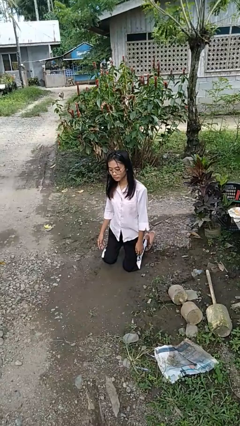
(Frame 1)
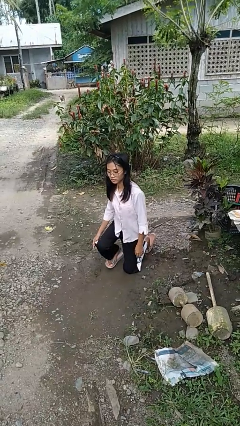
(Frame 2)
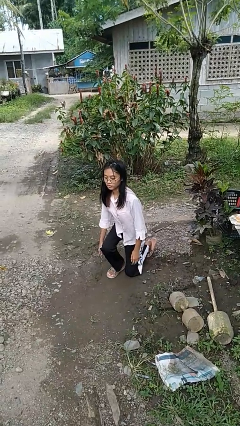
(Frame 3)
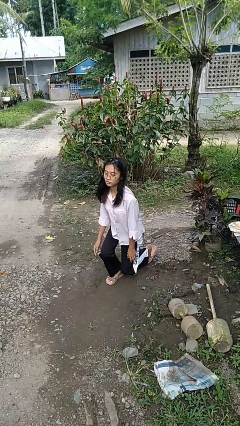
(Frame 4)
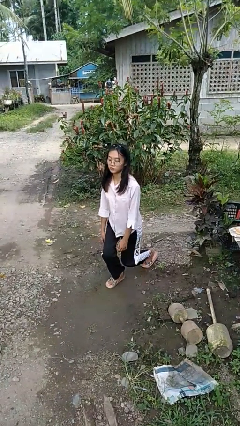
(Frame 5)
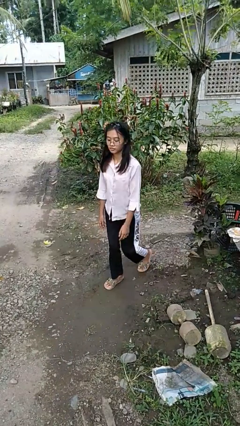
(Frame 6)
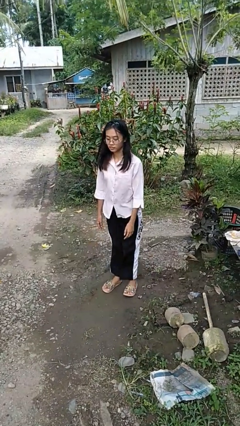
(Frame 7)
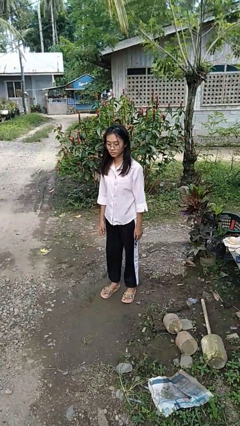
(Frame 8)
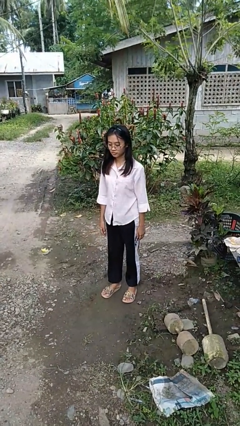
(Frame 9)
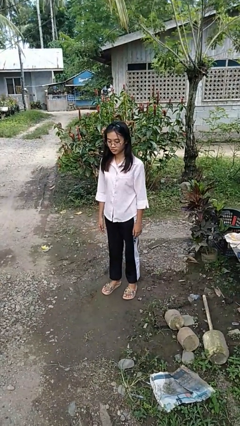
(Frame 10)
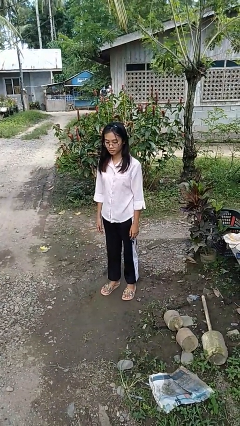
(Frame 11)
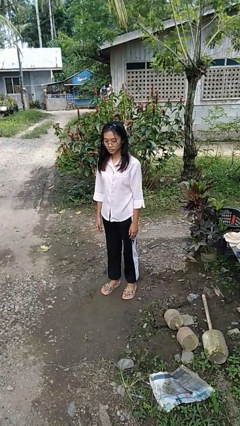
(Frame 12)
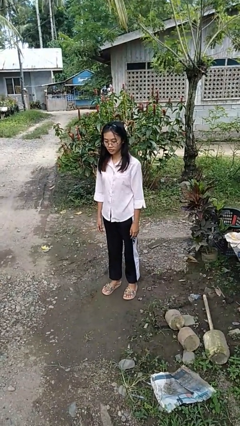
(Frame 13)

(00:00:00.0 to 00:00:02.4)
person stands up from floor

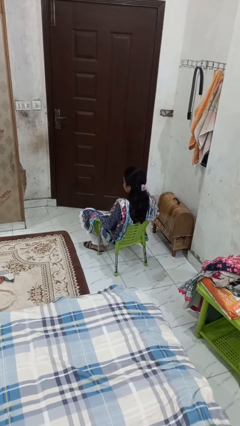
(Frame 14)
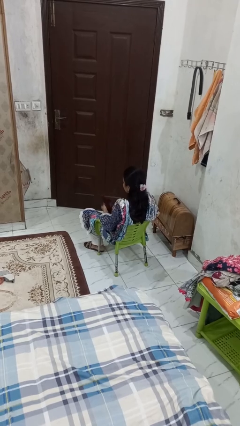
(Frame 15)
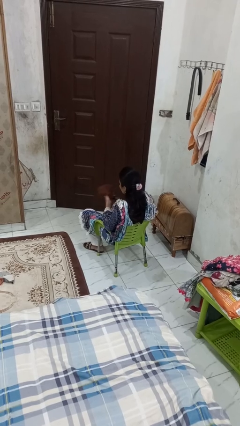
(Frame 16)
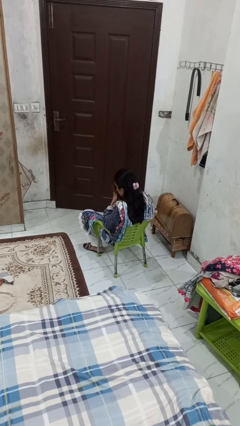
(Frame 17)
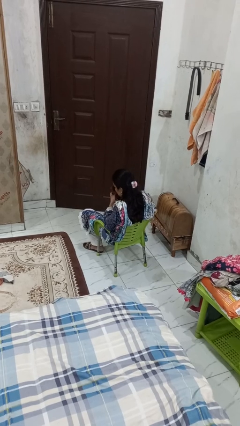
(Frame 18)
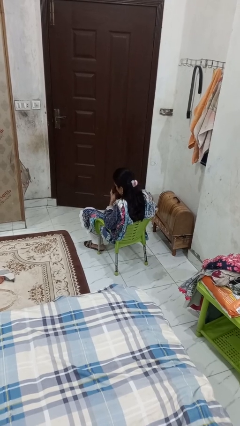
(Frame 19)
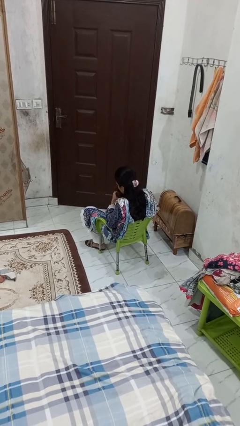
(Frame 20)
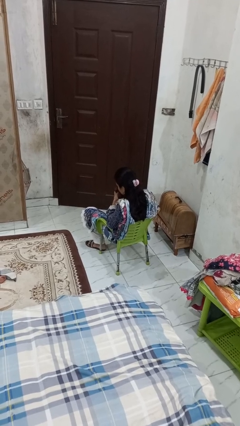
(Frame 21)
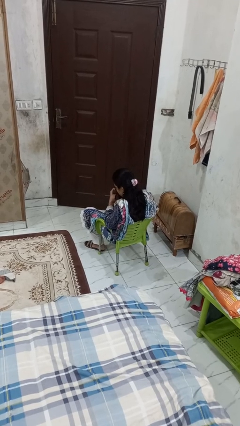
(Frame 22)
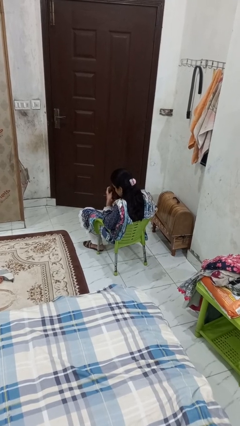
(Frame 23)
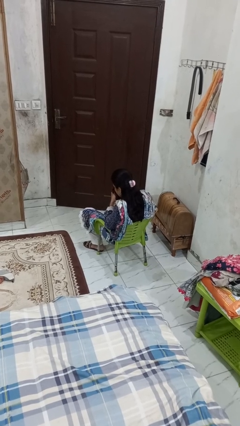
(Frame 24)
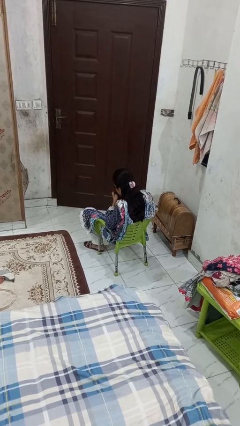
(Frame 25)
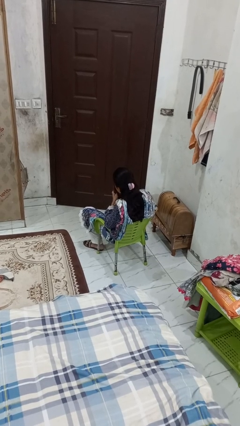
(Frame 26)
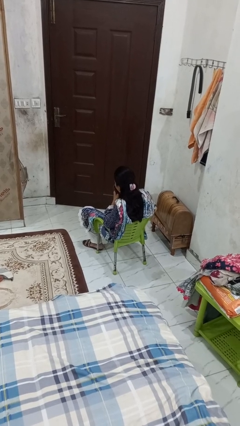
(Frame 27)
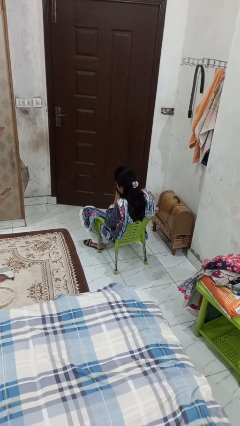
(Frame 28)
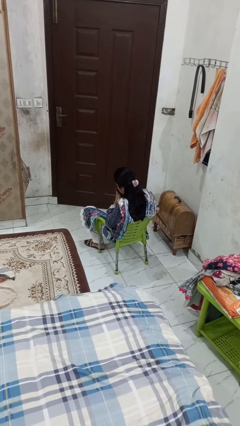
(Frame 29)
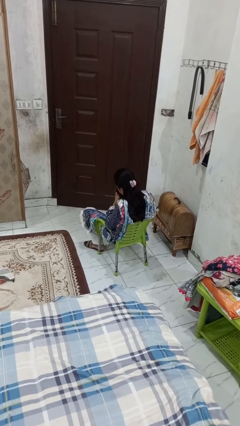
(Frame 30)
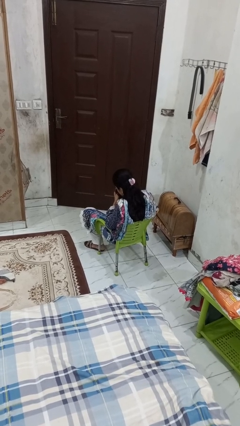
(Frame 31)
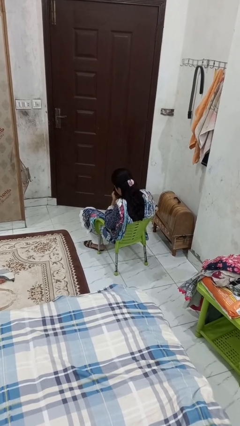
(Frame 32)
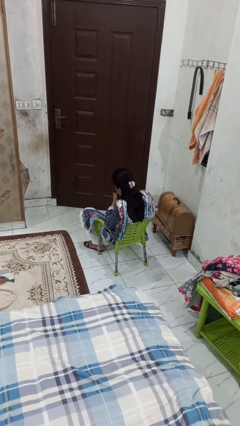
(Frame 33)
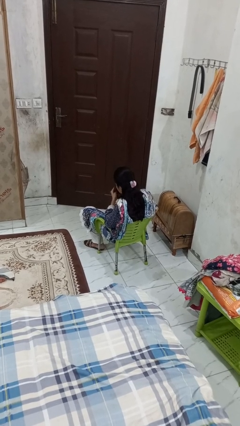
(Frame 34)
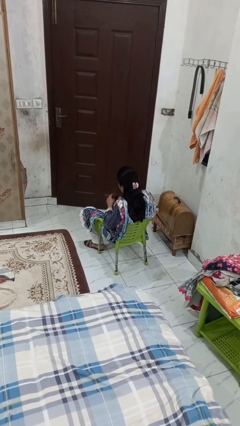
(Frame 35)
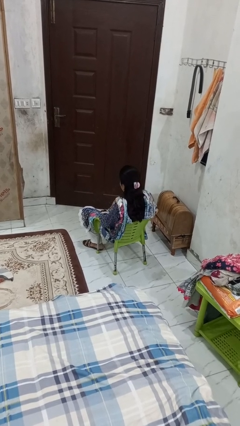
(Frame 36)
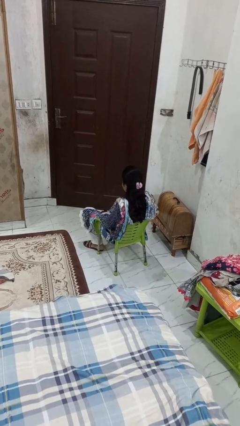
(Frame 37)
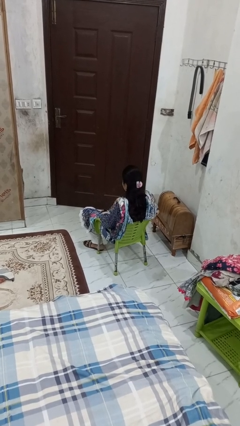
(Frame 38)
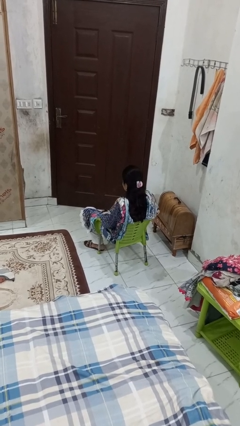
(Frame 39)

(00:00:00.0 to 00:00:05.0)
person blows nose

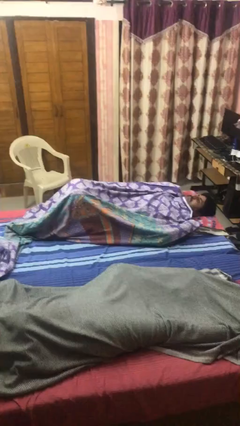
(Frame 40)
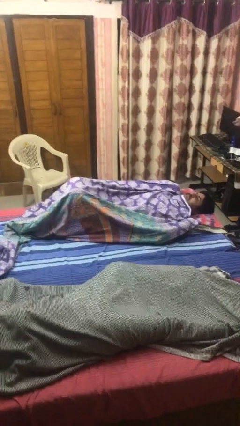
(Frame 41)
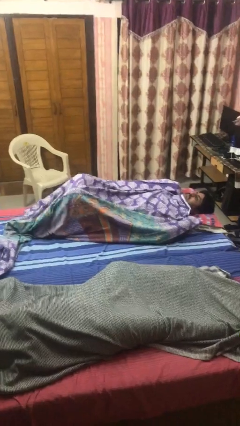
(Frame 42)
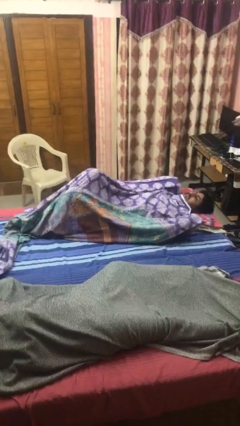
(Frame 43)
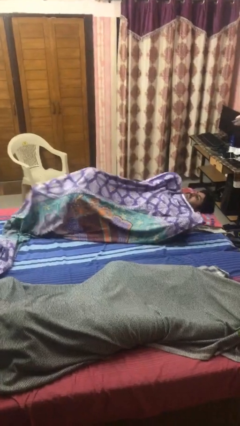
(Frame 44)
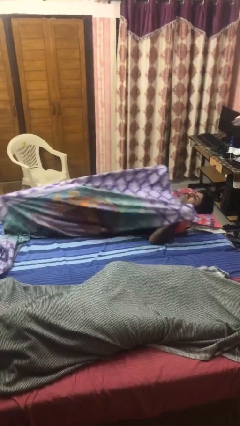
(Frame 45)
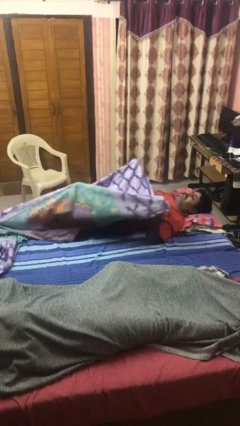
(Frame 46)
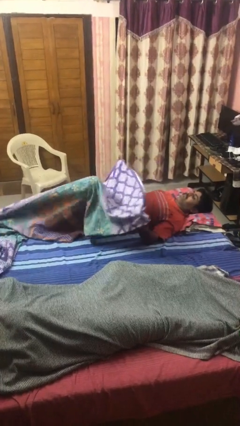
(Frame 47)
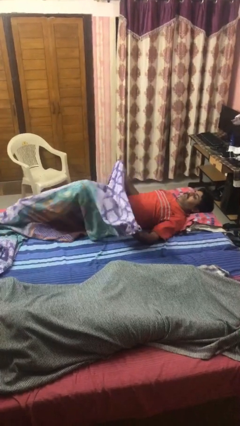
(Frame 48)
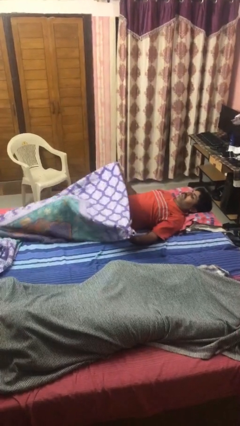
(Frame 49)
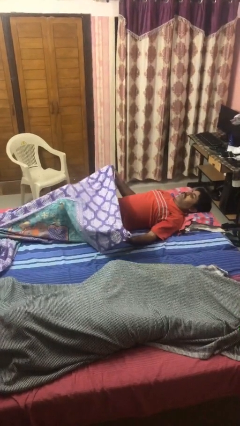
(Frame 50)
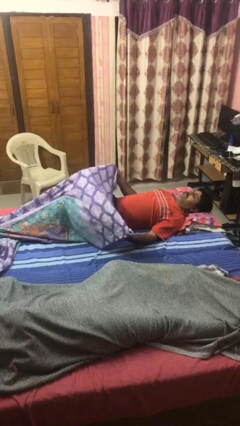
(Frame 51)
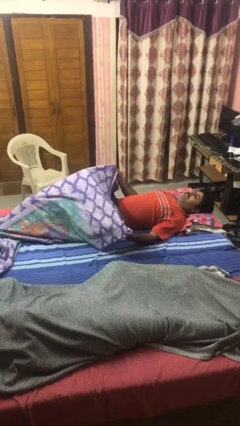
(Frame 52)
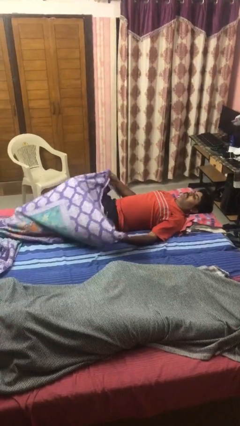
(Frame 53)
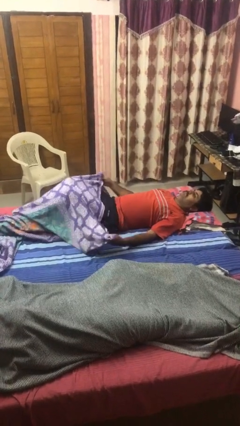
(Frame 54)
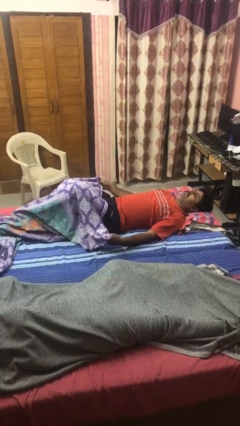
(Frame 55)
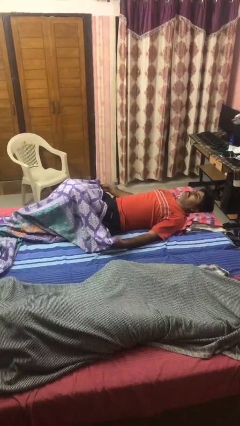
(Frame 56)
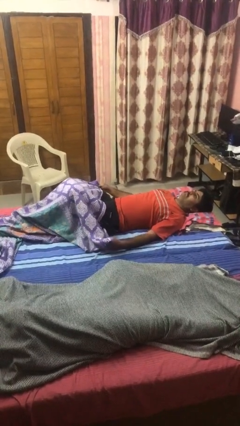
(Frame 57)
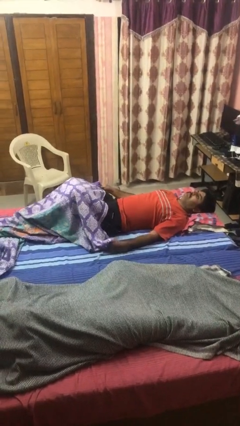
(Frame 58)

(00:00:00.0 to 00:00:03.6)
person uncovers with bedsheets

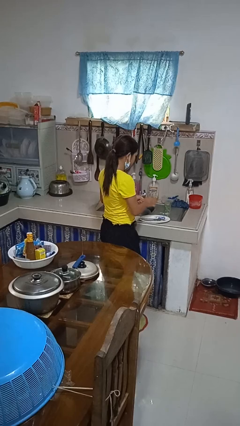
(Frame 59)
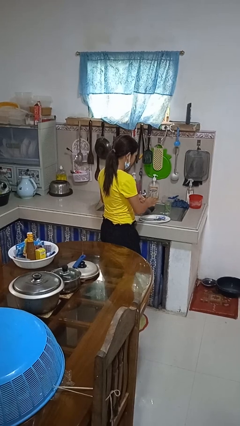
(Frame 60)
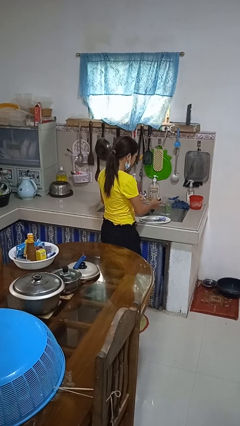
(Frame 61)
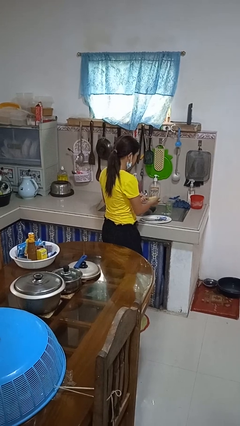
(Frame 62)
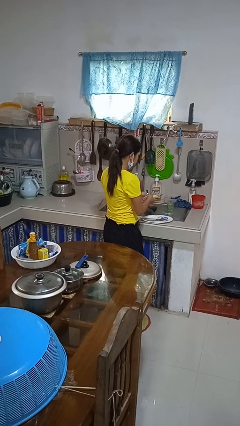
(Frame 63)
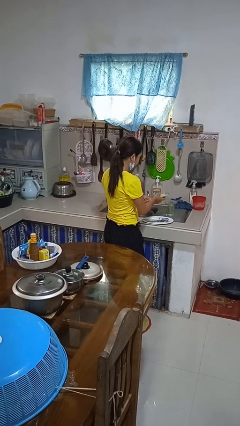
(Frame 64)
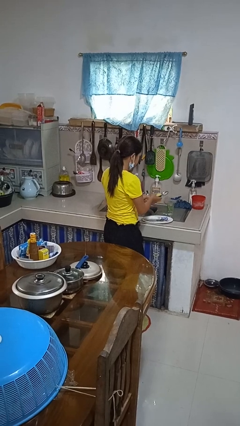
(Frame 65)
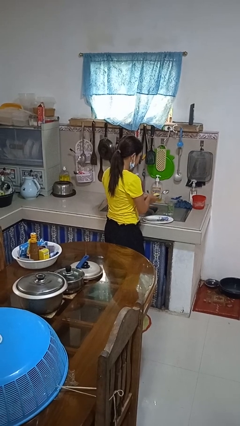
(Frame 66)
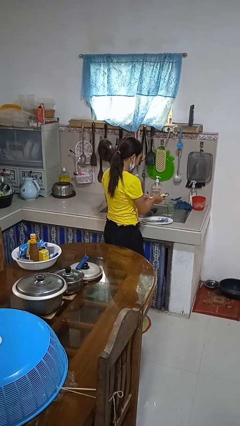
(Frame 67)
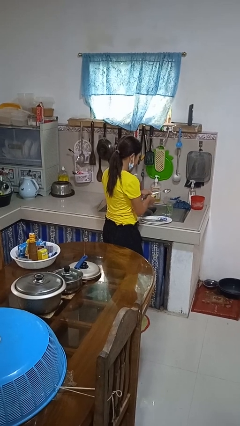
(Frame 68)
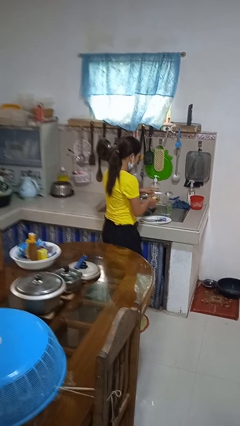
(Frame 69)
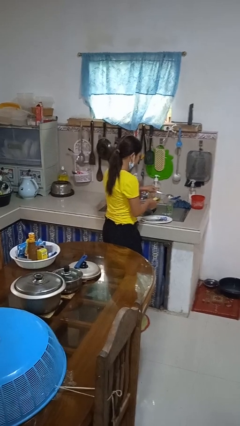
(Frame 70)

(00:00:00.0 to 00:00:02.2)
person washes dish

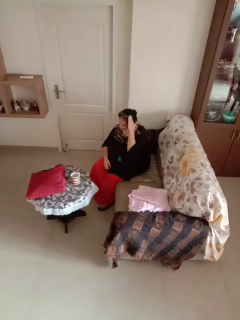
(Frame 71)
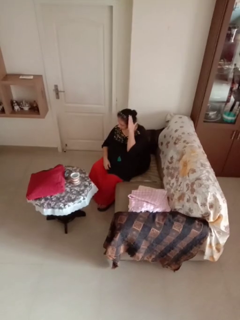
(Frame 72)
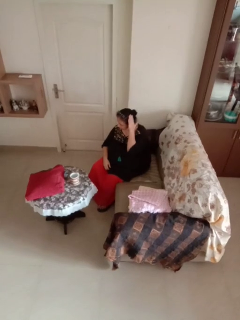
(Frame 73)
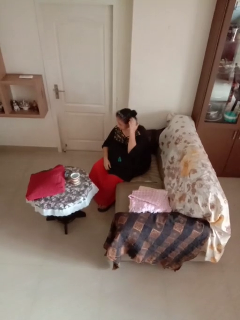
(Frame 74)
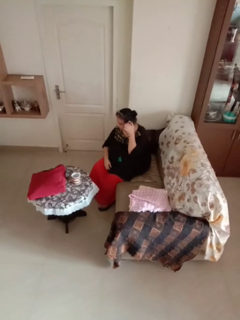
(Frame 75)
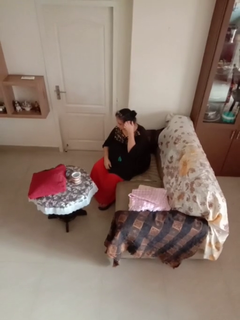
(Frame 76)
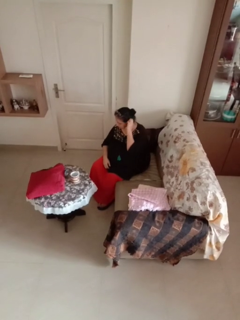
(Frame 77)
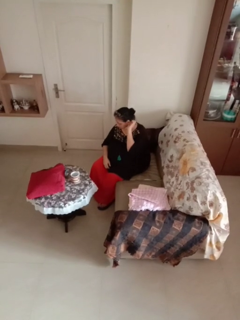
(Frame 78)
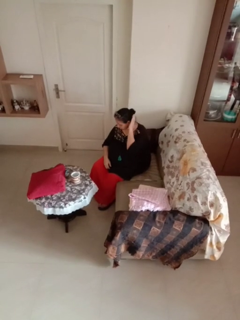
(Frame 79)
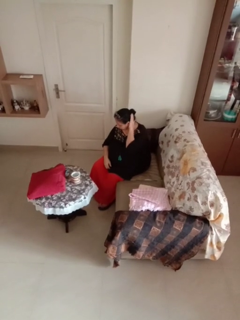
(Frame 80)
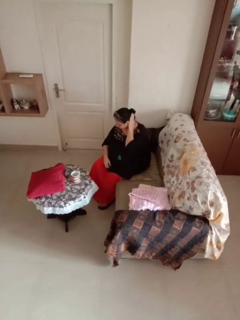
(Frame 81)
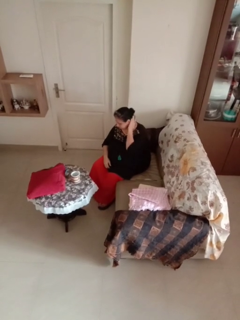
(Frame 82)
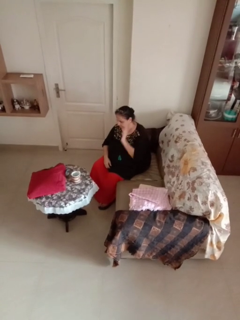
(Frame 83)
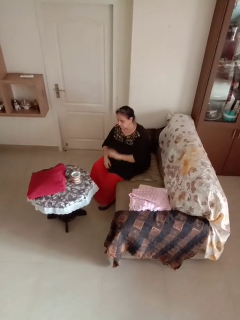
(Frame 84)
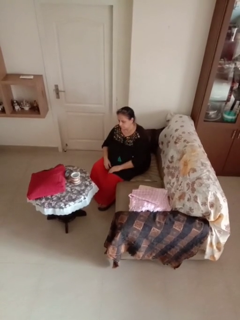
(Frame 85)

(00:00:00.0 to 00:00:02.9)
person strokes hair

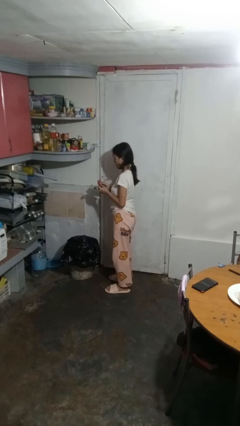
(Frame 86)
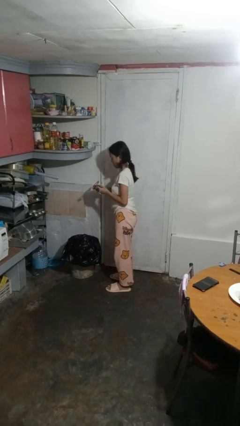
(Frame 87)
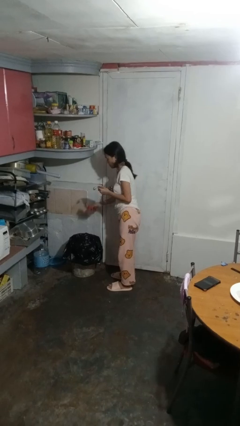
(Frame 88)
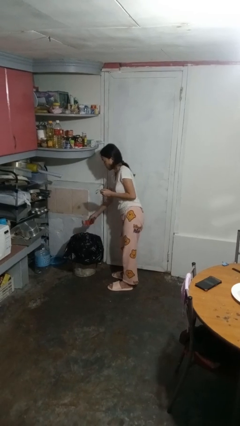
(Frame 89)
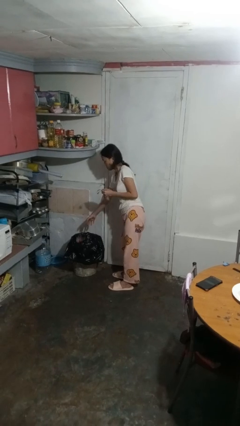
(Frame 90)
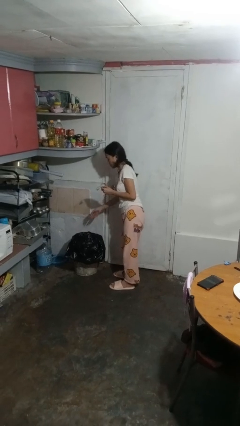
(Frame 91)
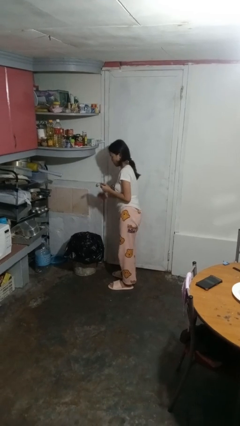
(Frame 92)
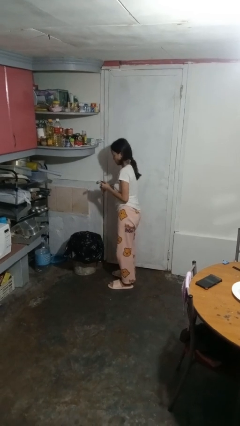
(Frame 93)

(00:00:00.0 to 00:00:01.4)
person discards trash

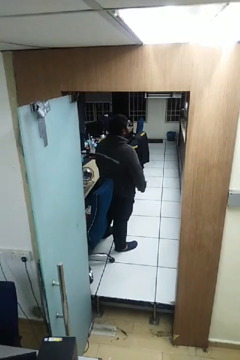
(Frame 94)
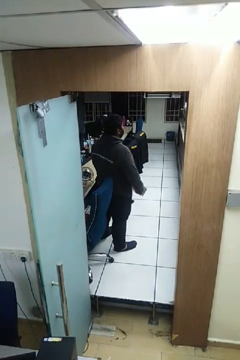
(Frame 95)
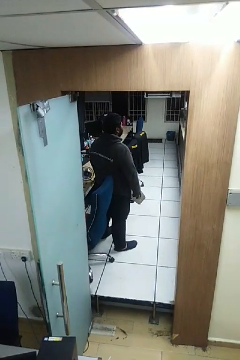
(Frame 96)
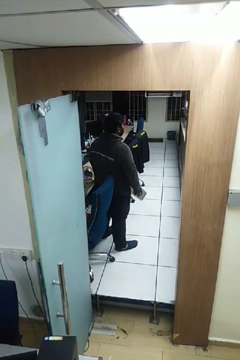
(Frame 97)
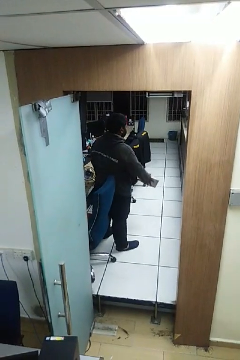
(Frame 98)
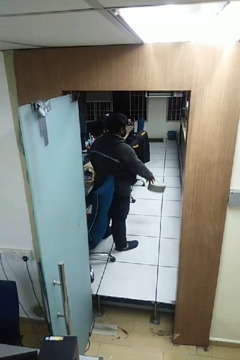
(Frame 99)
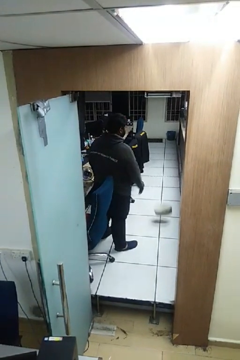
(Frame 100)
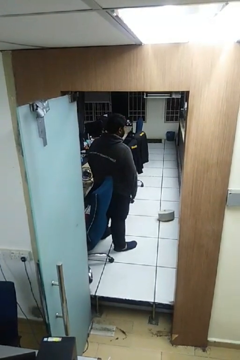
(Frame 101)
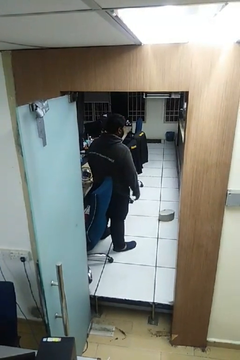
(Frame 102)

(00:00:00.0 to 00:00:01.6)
person throws object to ground
